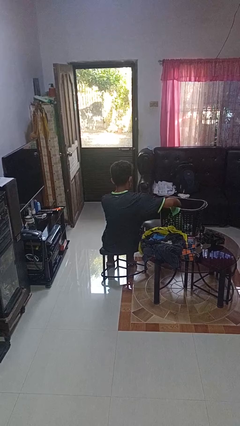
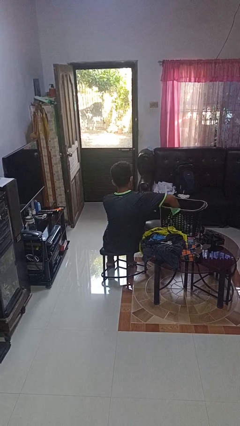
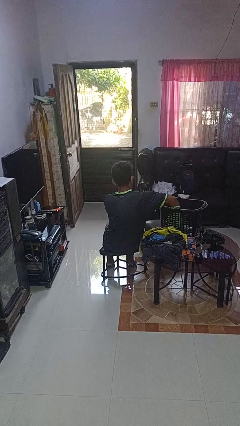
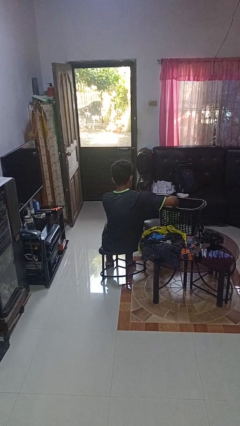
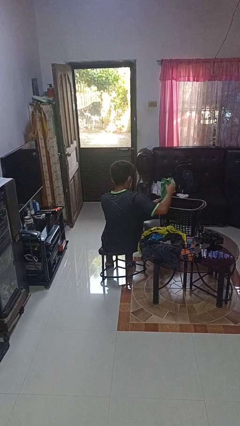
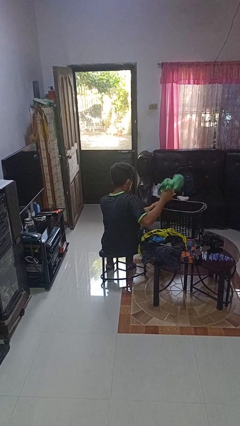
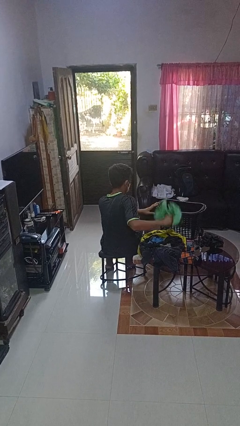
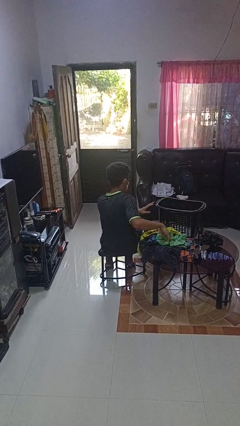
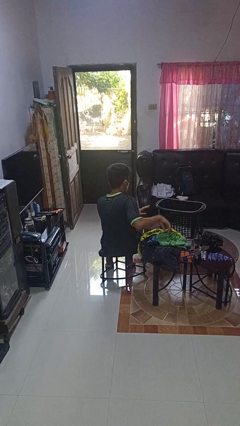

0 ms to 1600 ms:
person takes object from basket

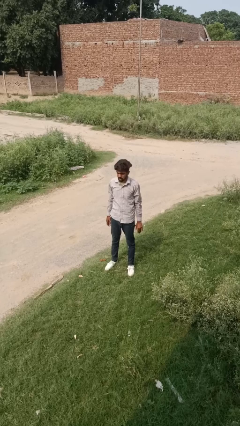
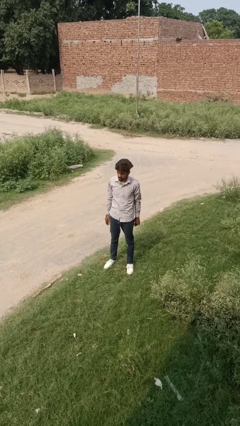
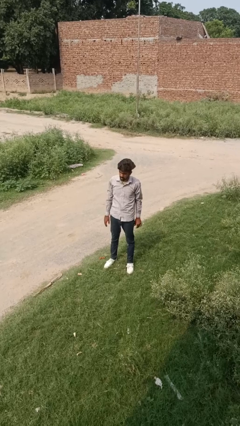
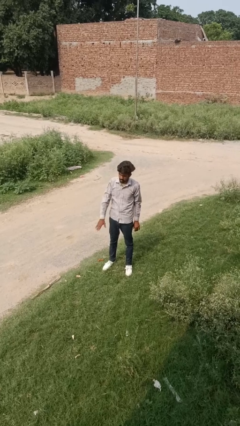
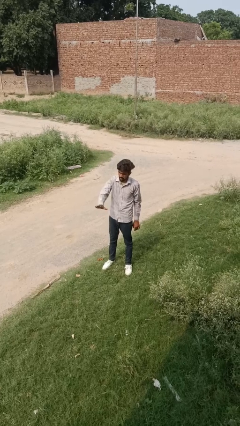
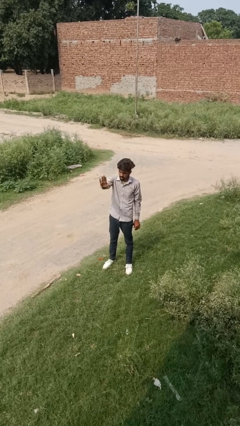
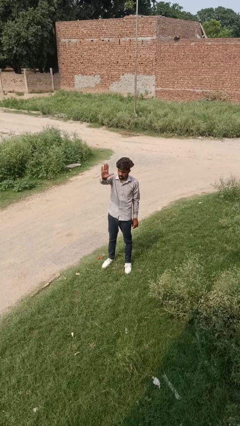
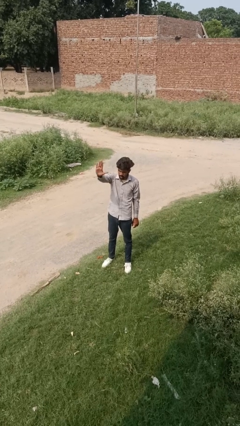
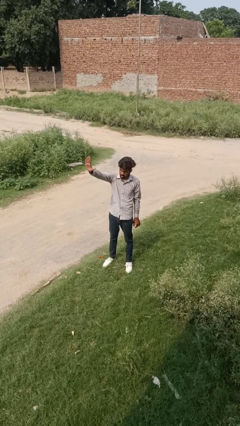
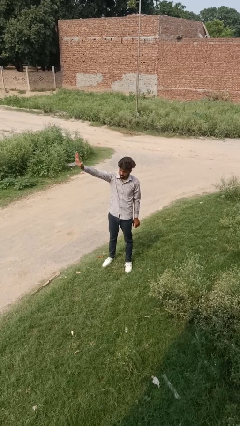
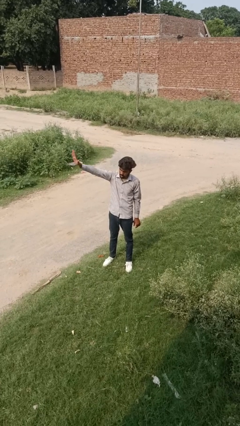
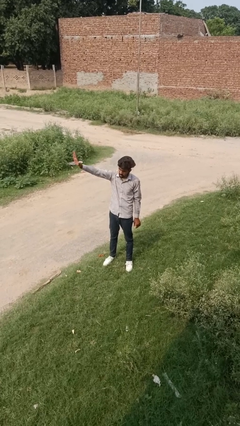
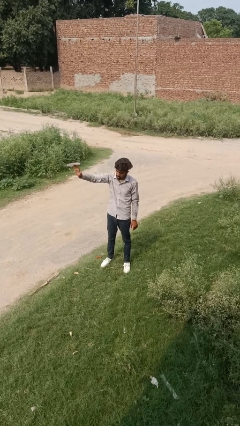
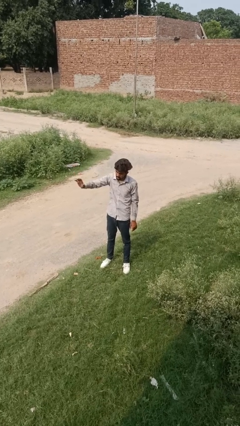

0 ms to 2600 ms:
person gestures swipe right

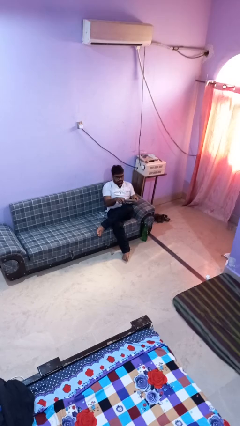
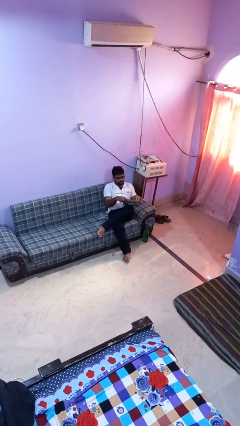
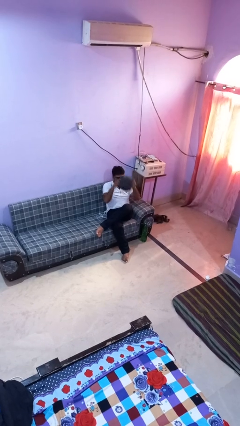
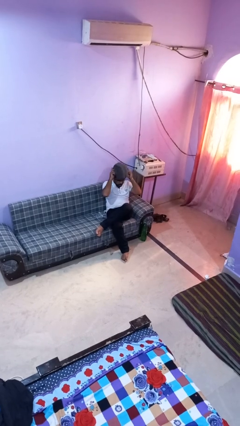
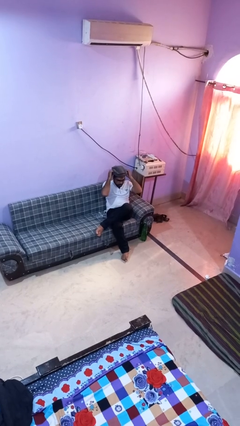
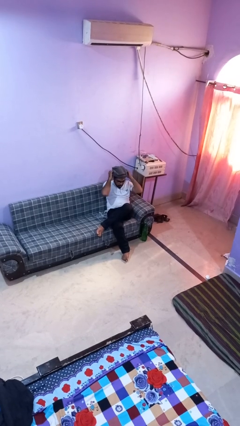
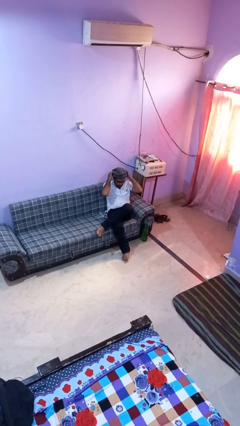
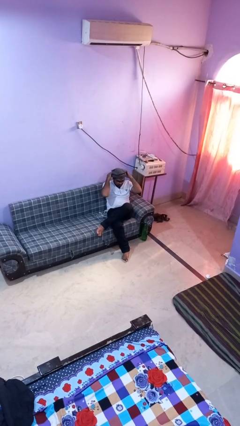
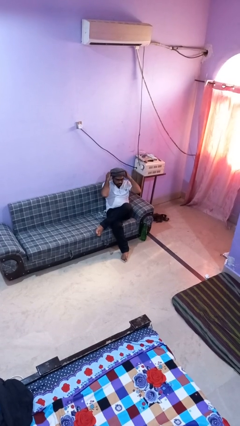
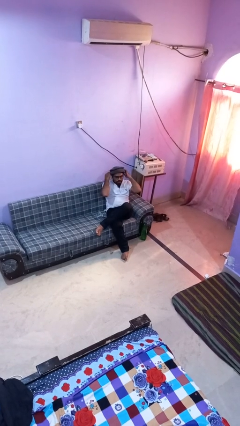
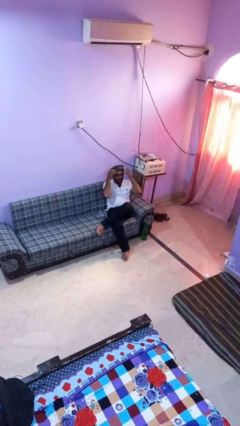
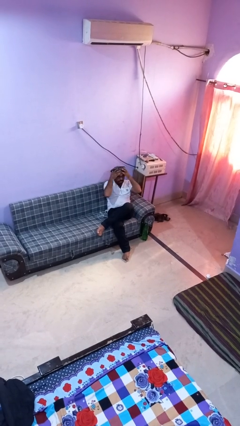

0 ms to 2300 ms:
person puts on hat

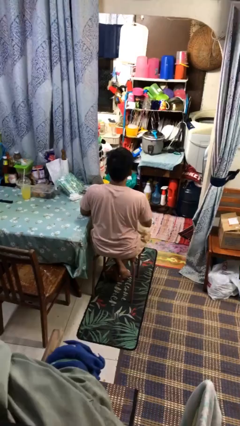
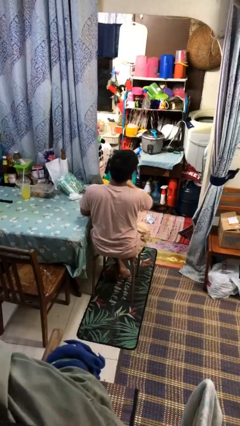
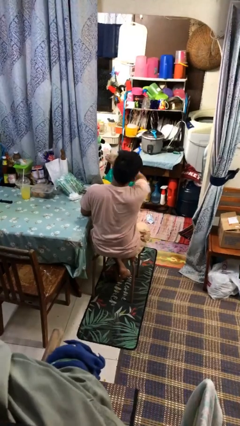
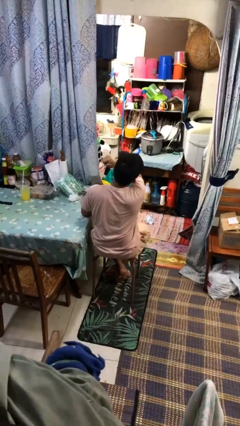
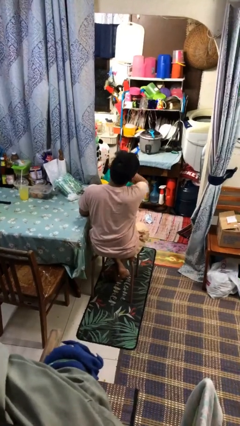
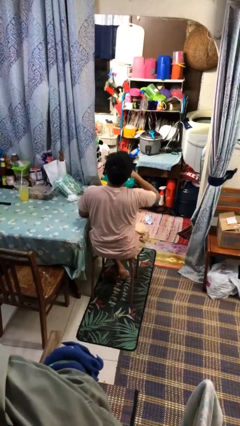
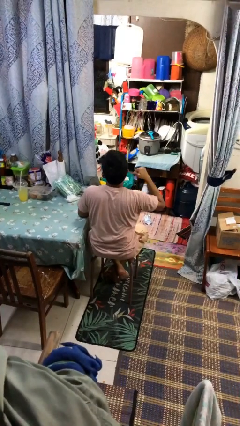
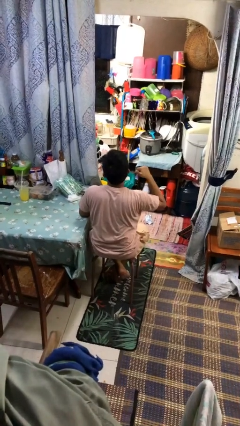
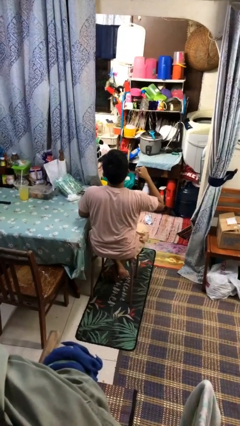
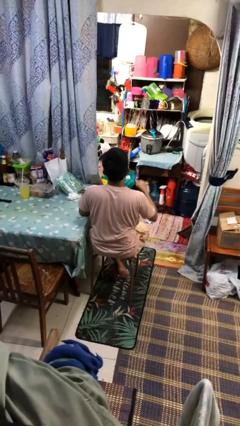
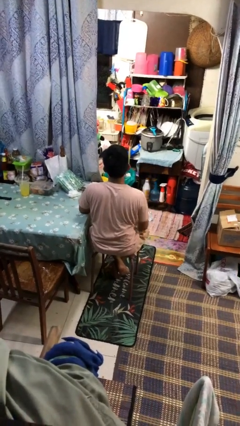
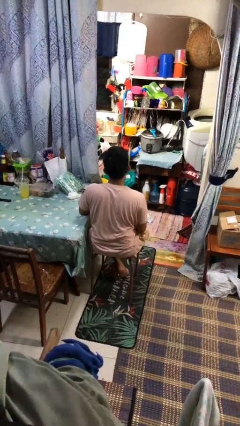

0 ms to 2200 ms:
person gestures cut

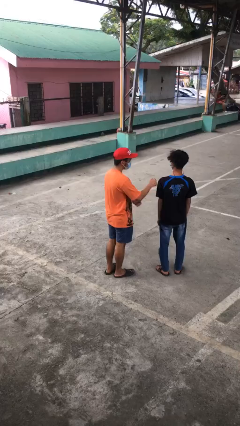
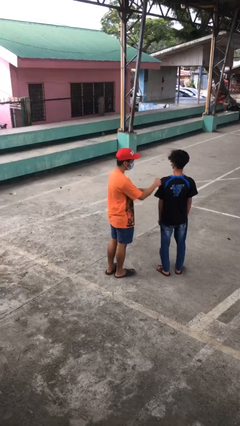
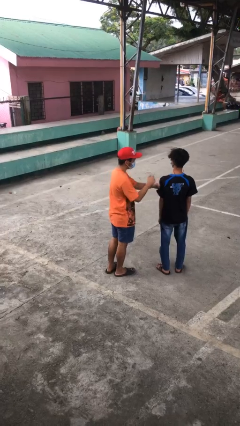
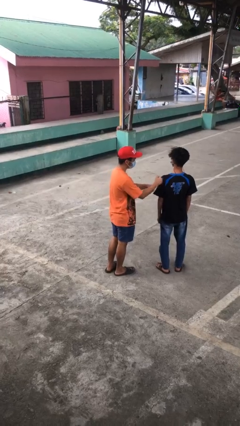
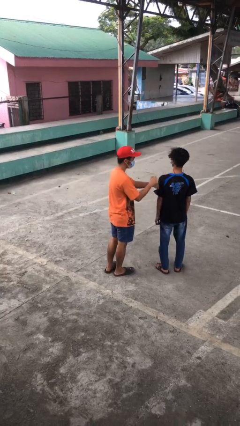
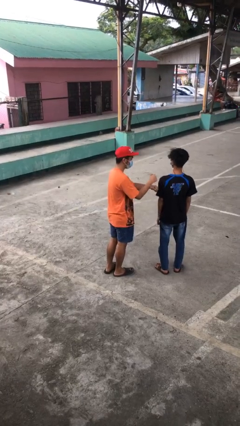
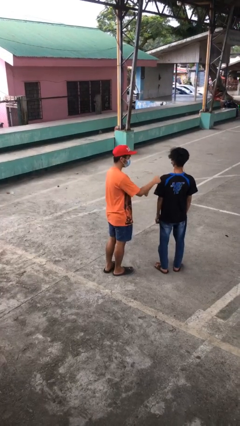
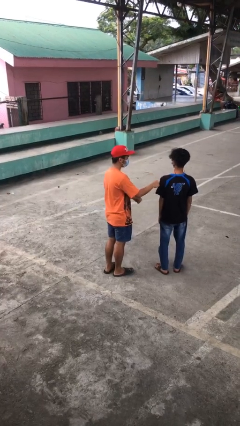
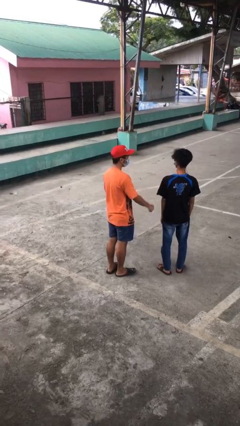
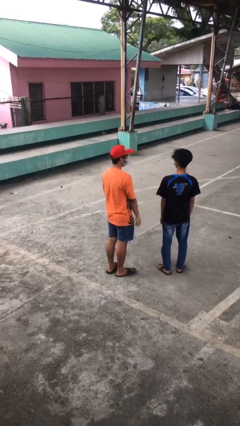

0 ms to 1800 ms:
person pounds shoulders of person

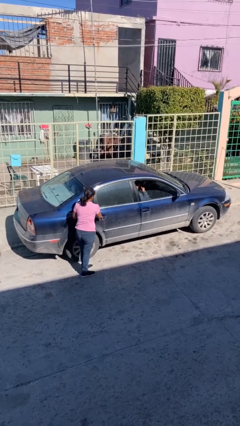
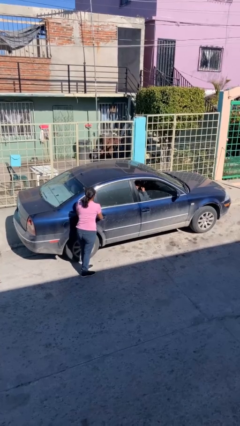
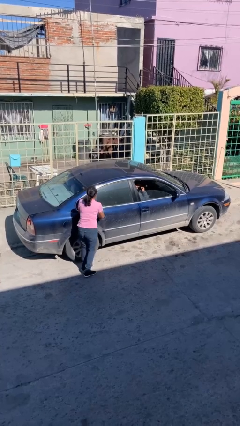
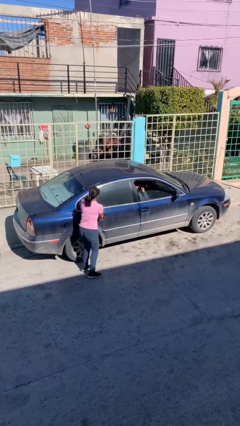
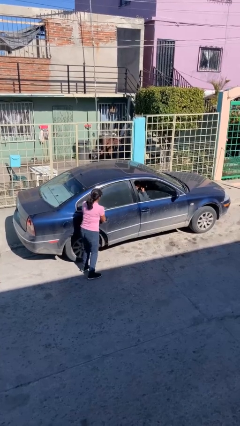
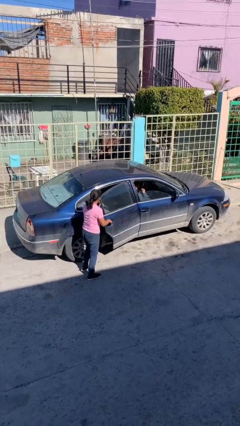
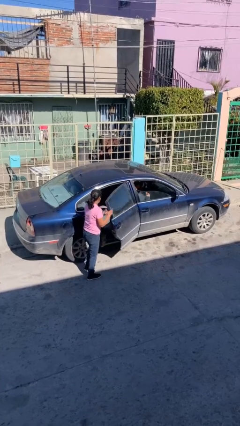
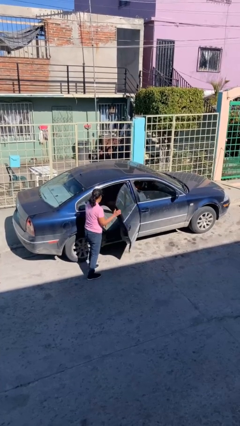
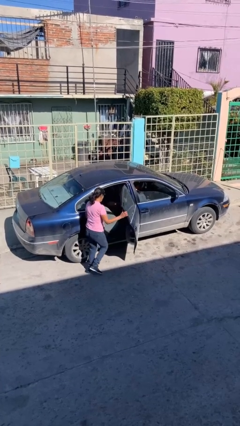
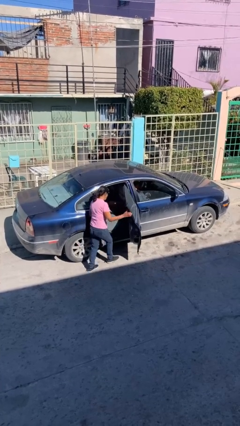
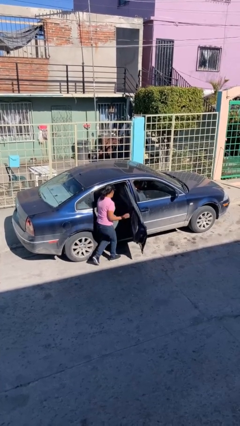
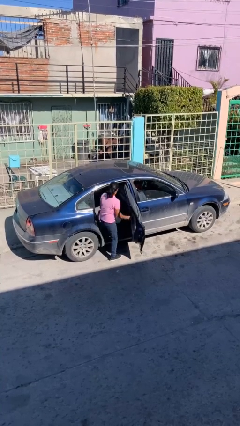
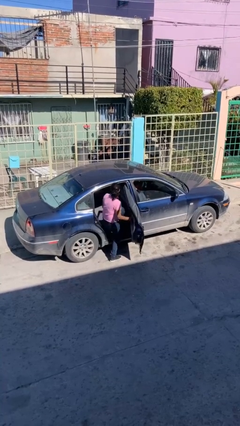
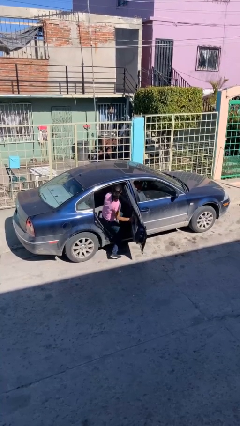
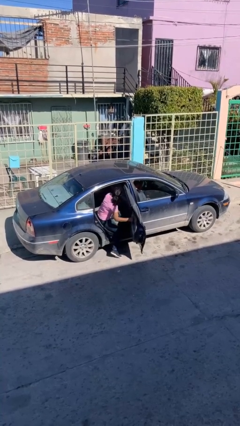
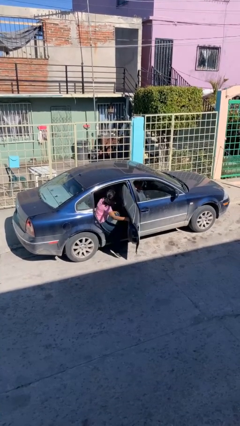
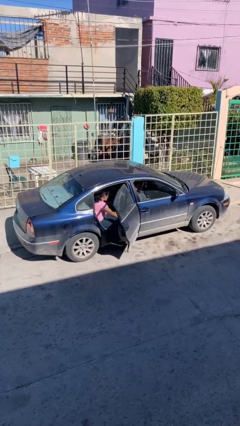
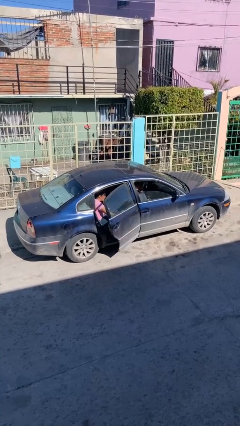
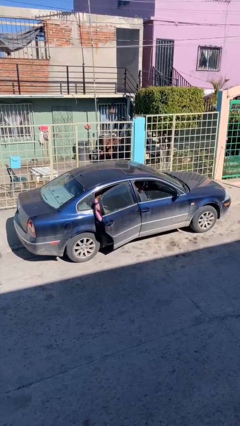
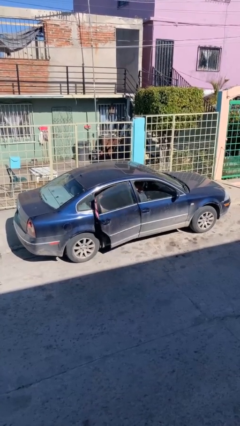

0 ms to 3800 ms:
car picks up person

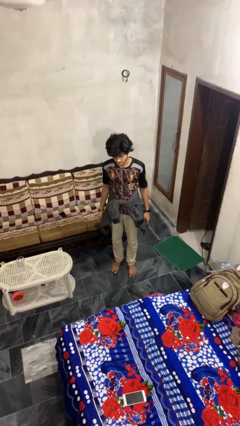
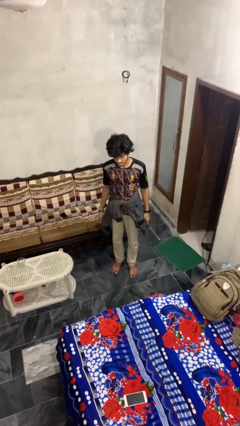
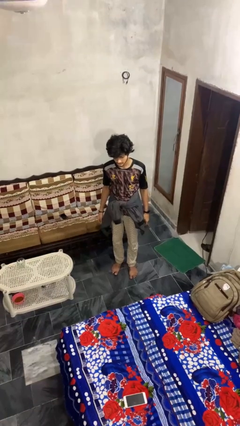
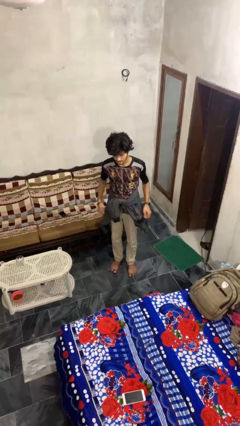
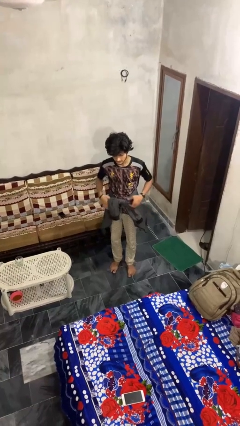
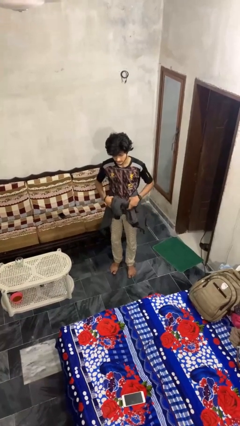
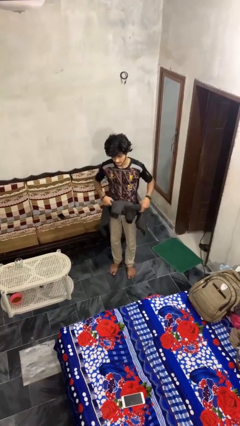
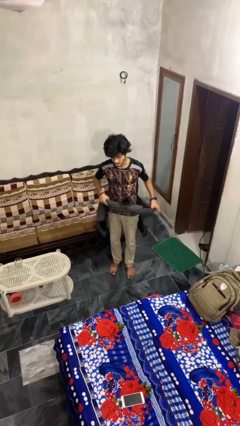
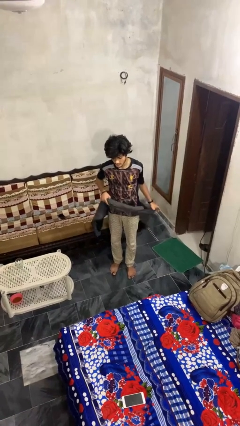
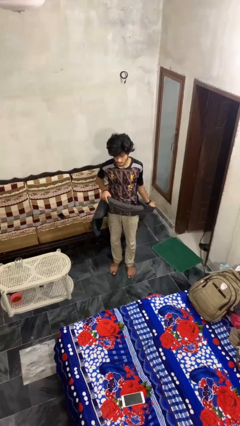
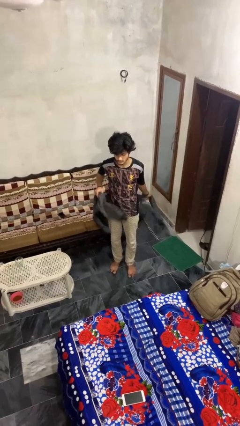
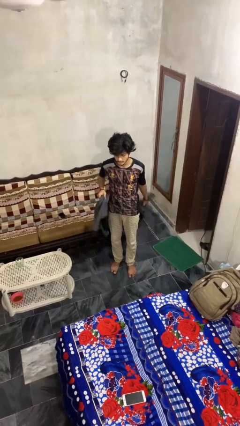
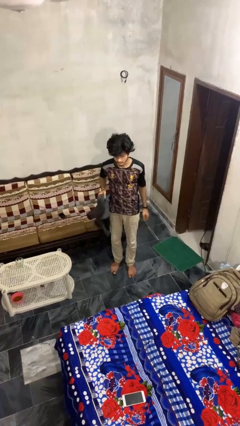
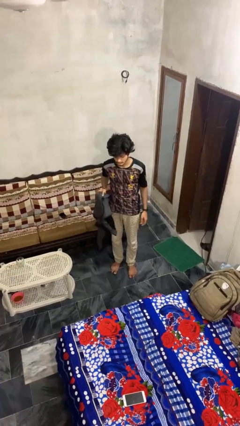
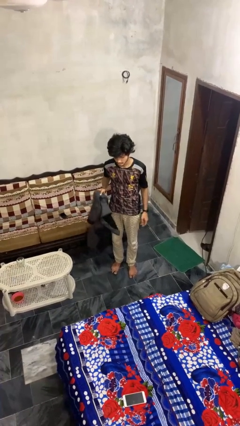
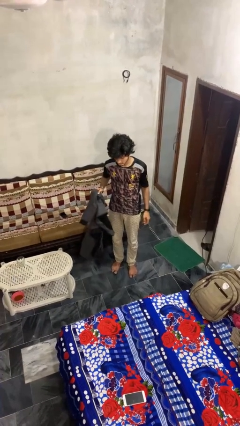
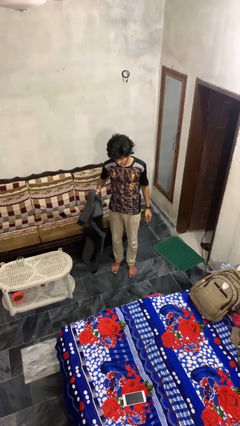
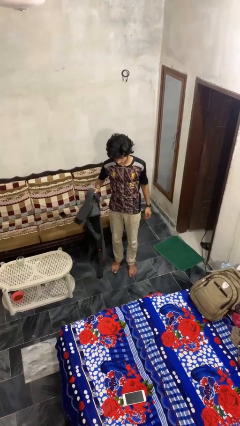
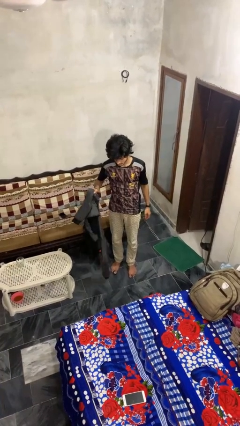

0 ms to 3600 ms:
person unties jacket around waist
